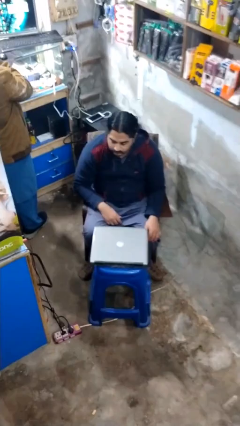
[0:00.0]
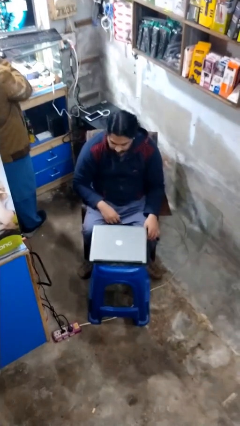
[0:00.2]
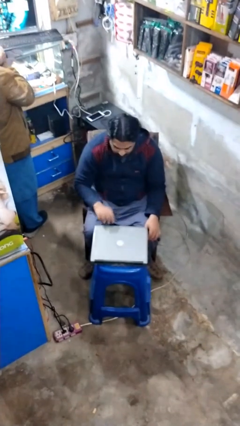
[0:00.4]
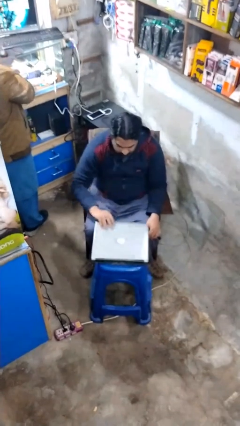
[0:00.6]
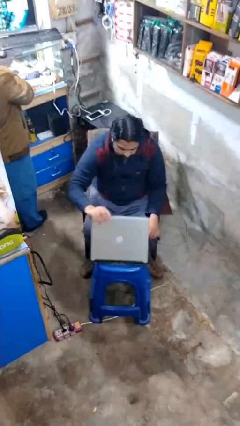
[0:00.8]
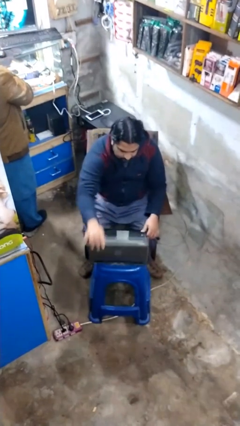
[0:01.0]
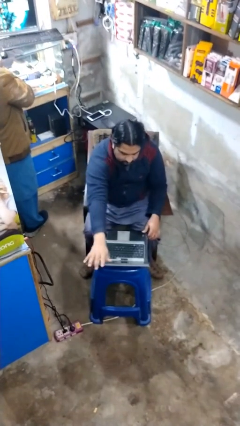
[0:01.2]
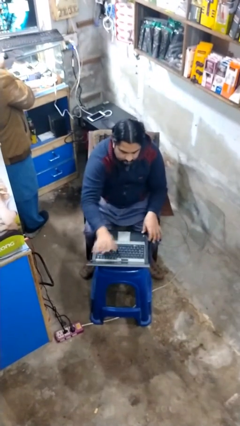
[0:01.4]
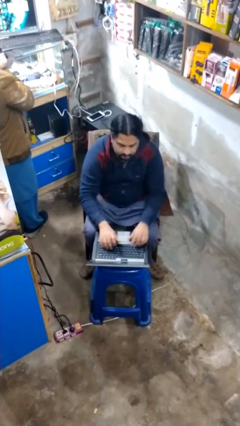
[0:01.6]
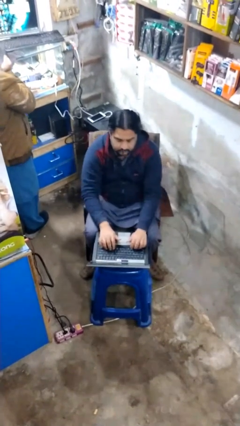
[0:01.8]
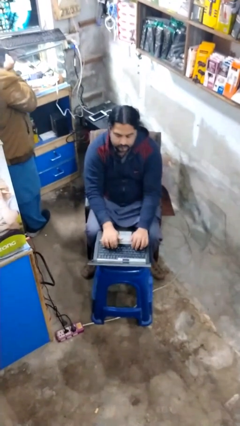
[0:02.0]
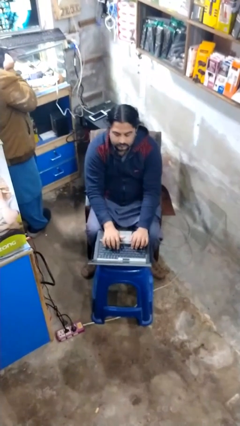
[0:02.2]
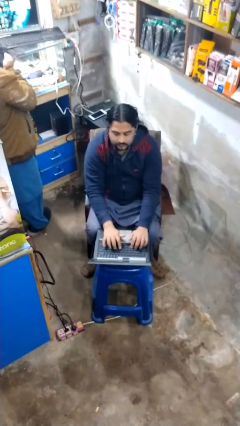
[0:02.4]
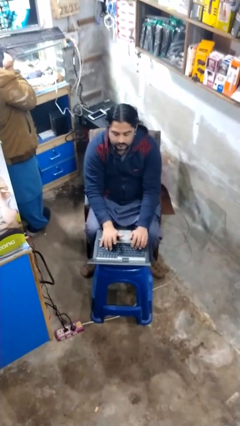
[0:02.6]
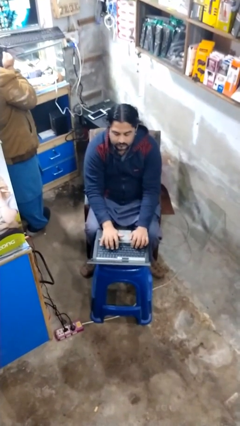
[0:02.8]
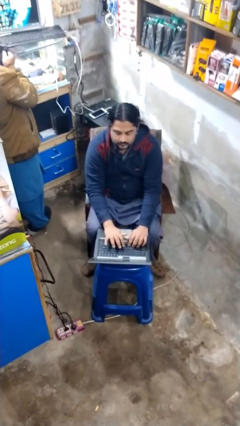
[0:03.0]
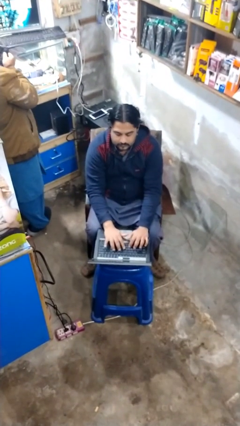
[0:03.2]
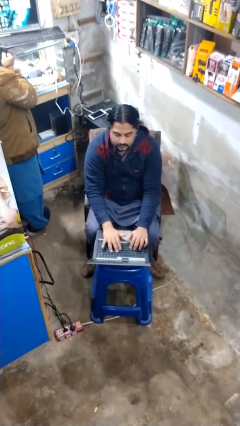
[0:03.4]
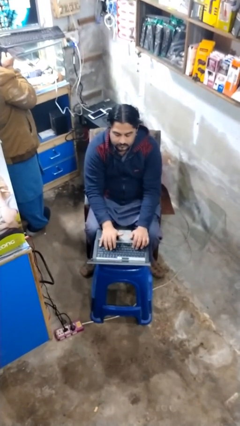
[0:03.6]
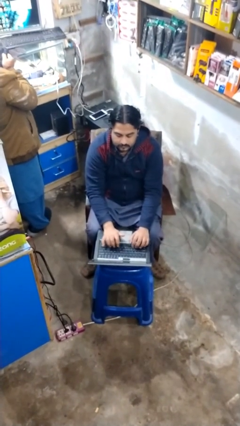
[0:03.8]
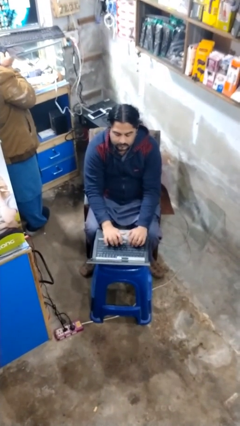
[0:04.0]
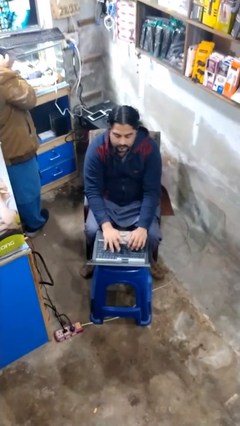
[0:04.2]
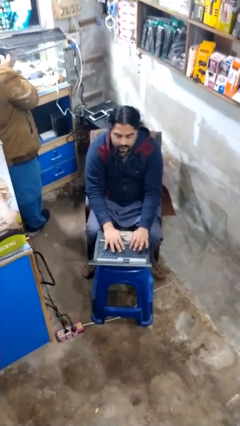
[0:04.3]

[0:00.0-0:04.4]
person interacts with laptop

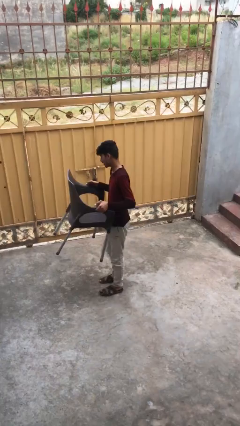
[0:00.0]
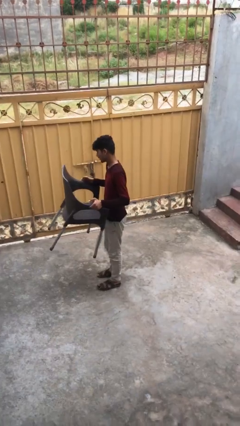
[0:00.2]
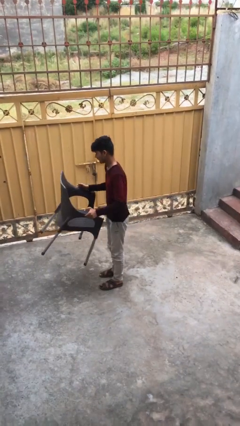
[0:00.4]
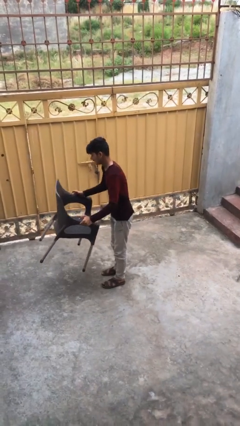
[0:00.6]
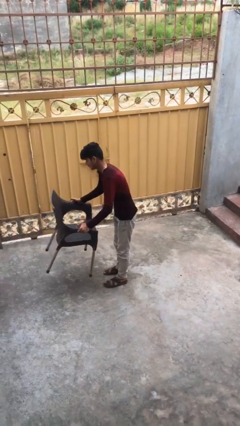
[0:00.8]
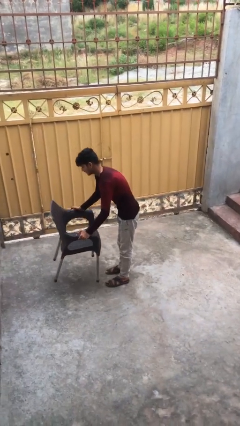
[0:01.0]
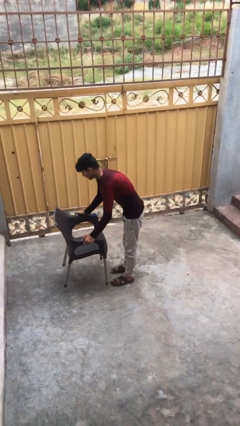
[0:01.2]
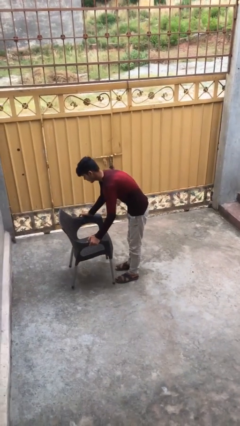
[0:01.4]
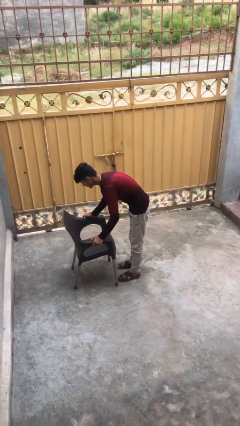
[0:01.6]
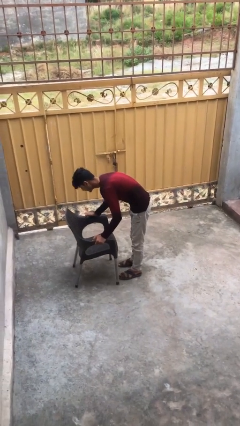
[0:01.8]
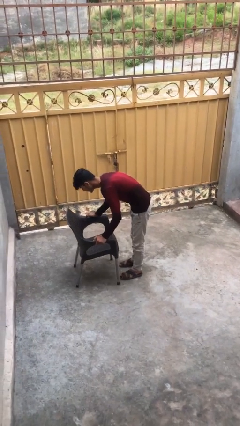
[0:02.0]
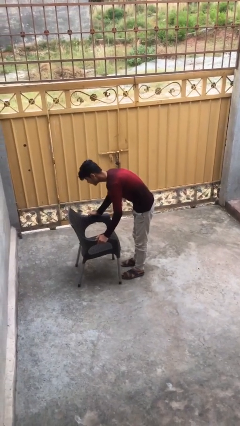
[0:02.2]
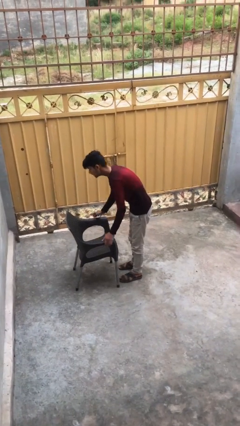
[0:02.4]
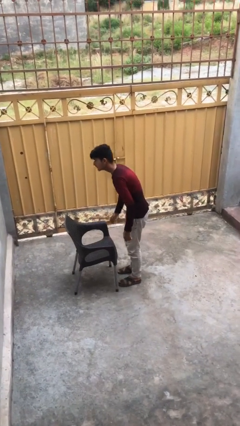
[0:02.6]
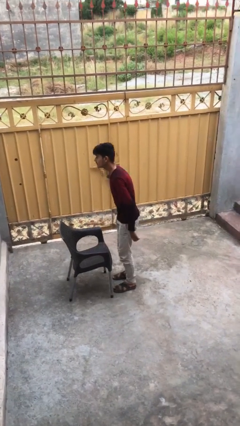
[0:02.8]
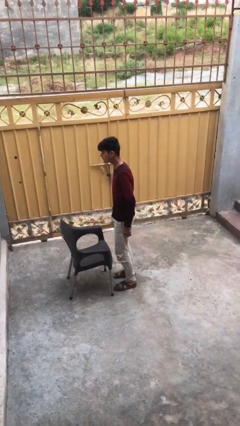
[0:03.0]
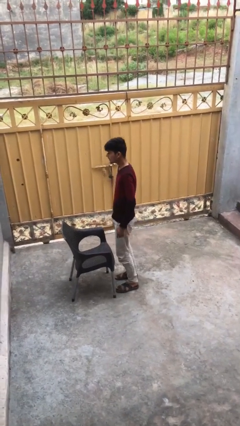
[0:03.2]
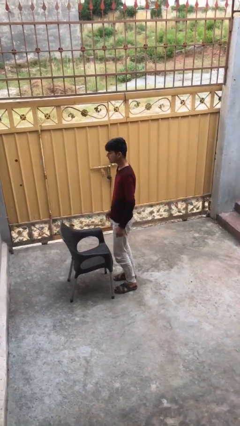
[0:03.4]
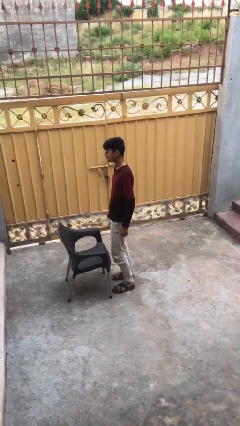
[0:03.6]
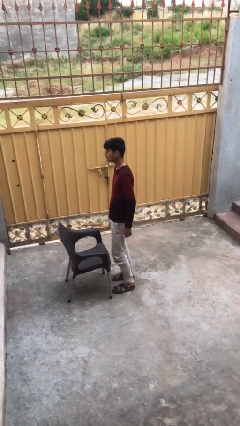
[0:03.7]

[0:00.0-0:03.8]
person puts down object on floor

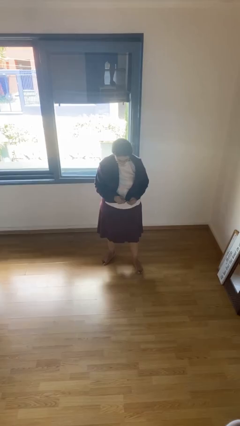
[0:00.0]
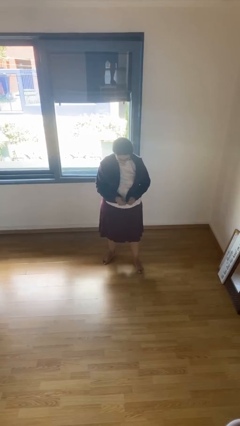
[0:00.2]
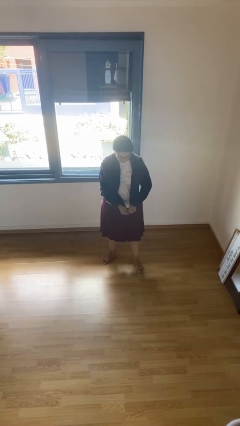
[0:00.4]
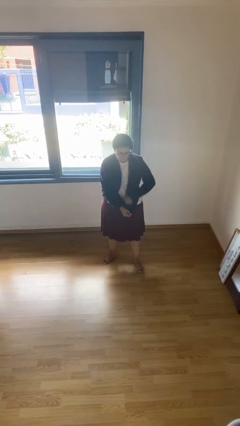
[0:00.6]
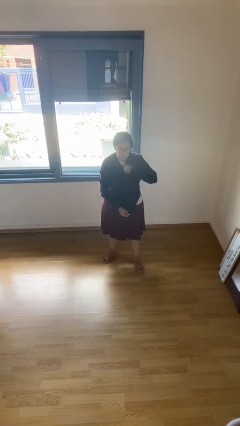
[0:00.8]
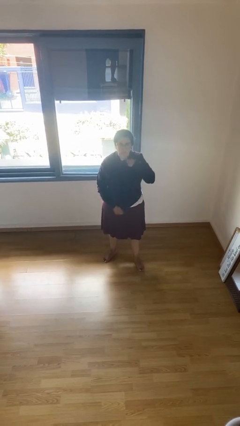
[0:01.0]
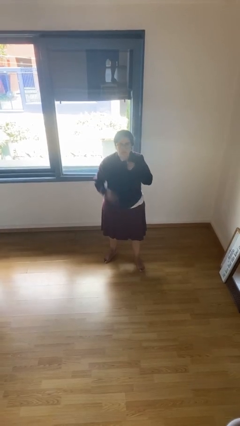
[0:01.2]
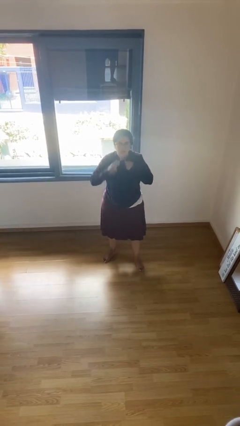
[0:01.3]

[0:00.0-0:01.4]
person zips up jacket

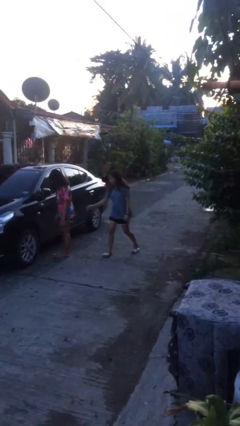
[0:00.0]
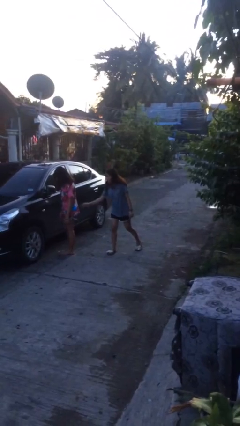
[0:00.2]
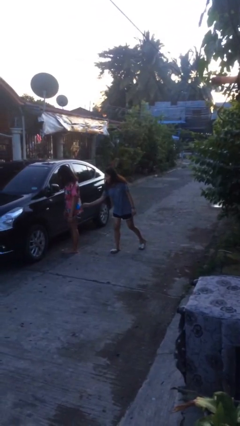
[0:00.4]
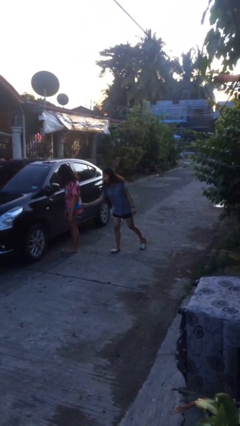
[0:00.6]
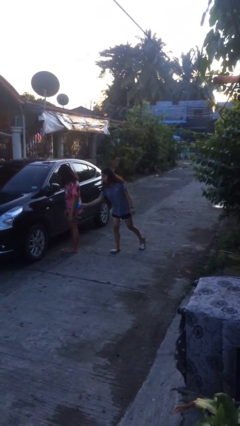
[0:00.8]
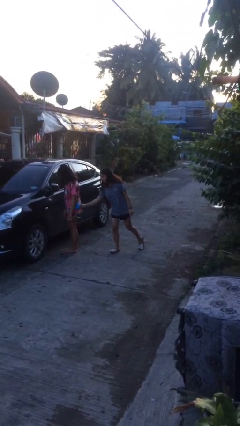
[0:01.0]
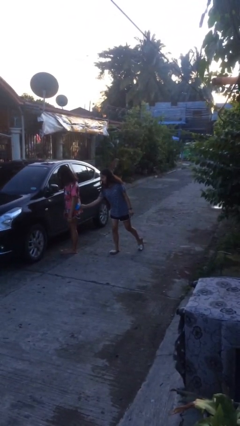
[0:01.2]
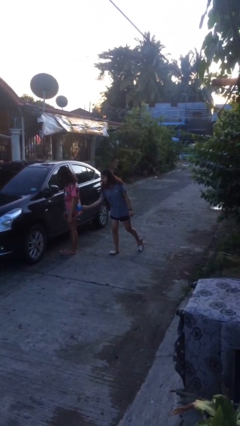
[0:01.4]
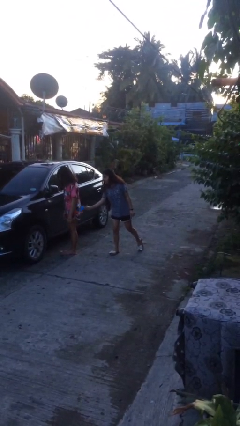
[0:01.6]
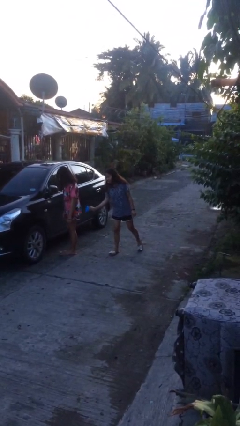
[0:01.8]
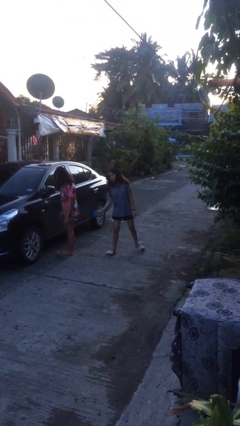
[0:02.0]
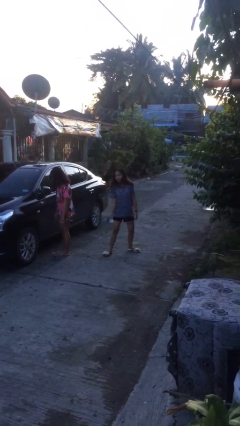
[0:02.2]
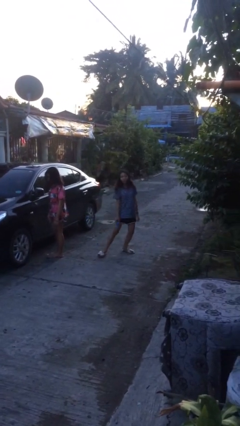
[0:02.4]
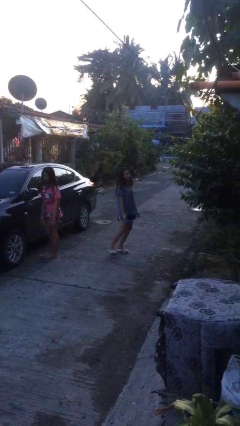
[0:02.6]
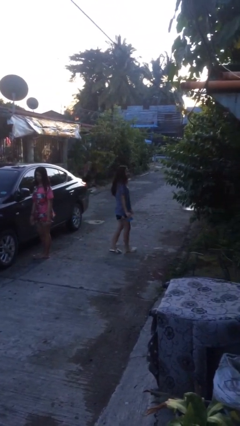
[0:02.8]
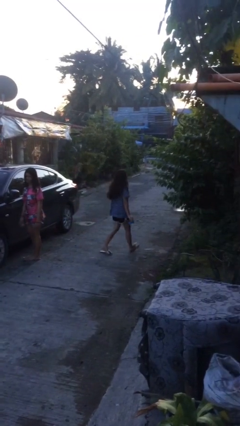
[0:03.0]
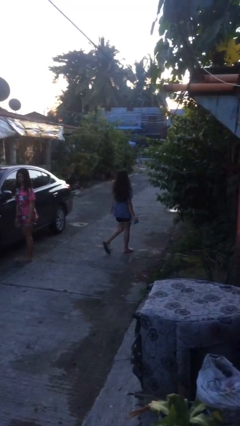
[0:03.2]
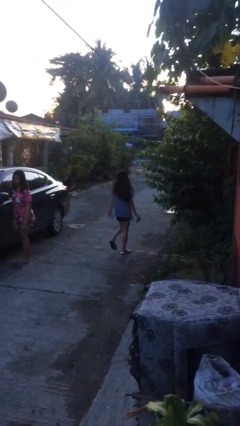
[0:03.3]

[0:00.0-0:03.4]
person steals object from person

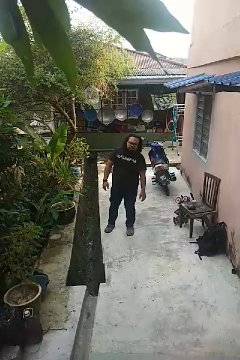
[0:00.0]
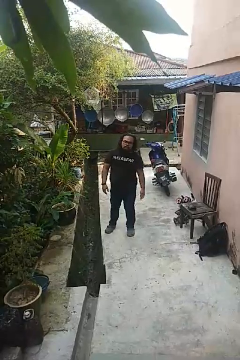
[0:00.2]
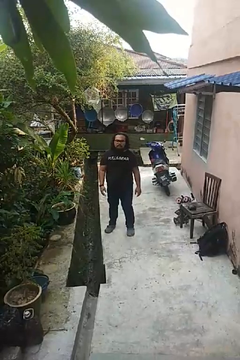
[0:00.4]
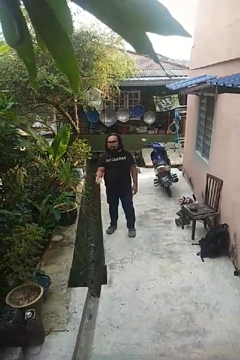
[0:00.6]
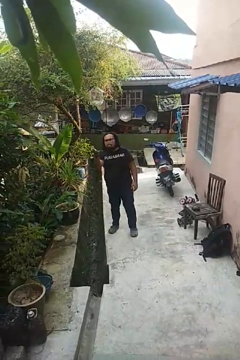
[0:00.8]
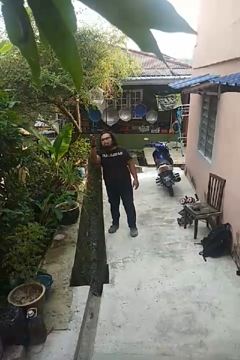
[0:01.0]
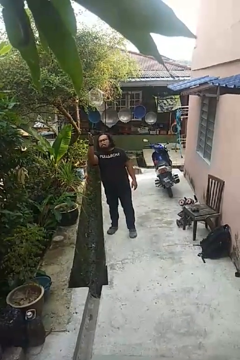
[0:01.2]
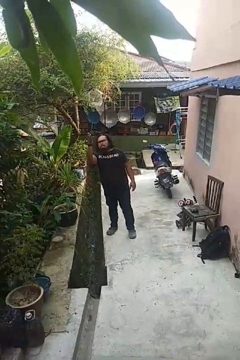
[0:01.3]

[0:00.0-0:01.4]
person gestures swipe up

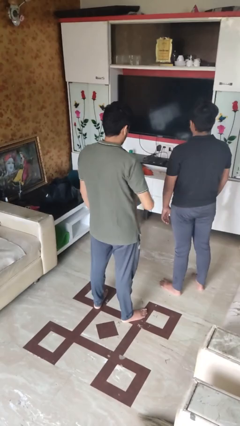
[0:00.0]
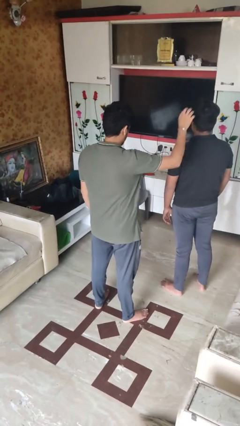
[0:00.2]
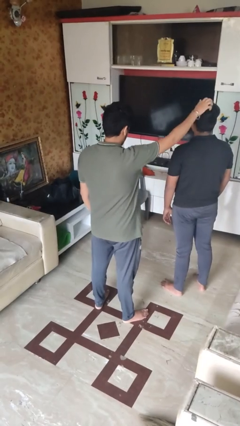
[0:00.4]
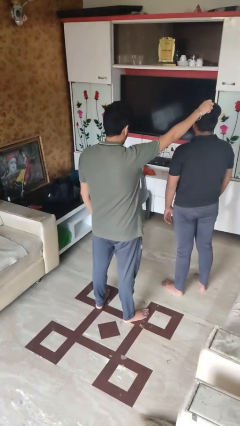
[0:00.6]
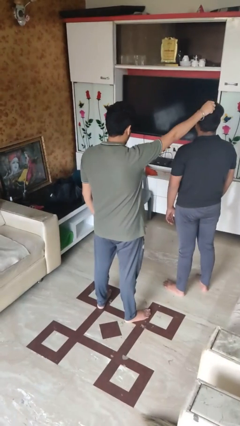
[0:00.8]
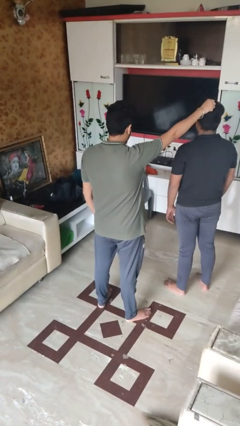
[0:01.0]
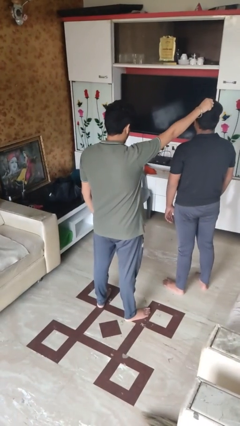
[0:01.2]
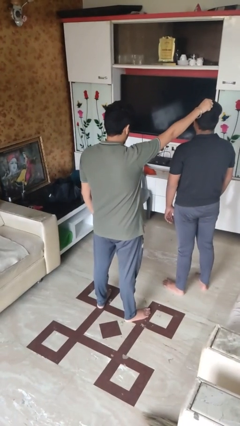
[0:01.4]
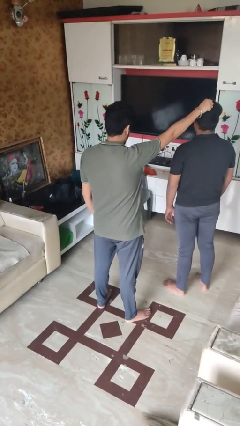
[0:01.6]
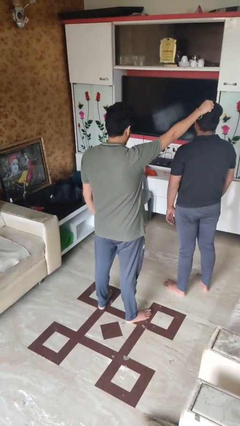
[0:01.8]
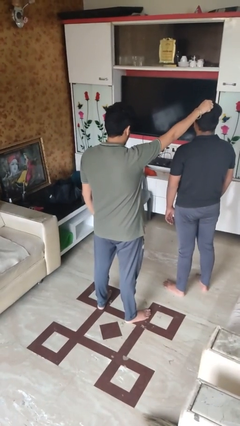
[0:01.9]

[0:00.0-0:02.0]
person grabs person by hair

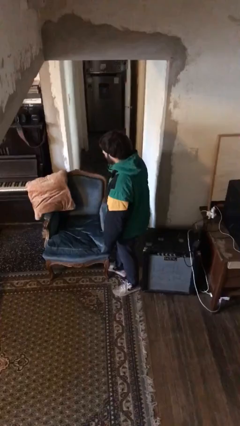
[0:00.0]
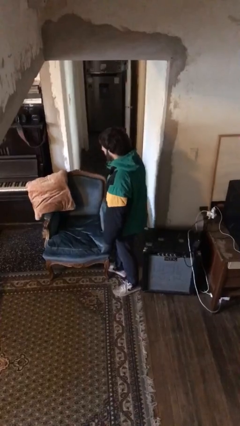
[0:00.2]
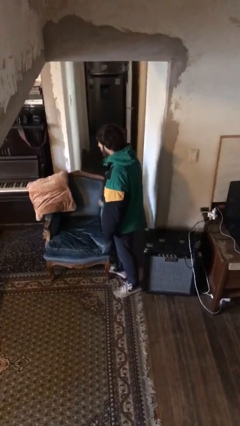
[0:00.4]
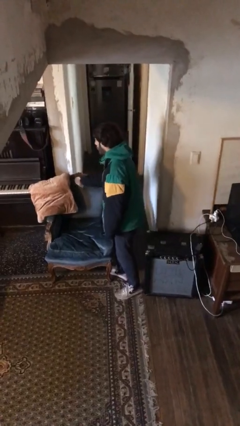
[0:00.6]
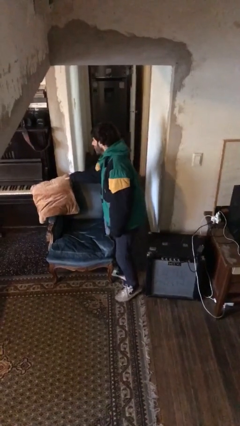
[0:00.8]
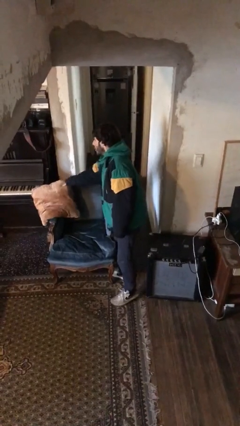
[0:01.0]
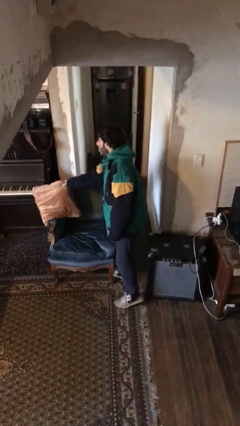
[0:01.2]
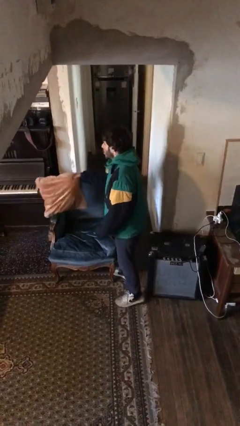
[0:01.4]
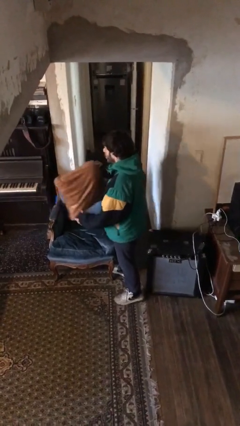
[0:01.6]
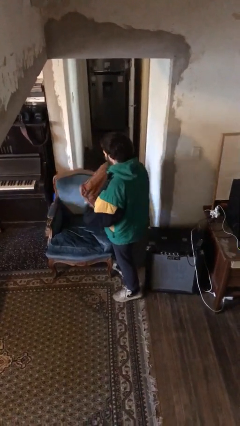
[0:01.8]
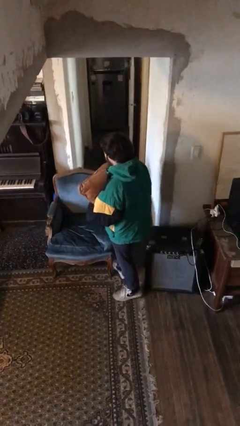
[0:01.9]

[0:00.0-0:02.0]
person picks up object from couch
